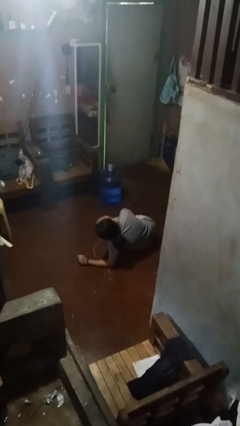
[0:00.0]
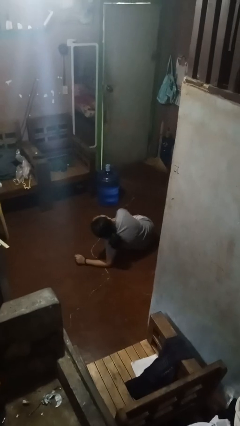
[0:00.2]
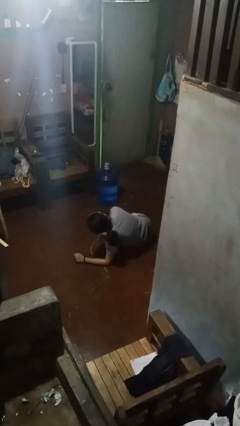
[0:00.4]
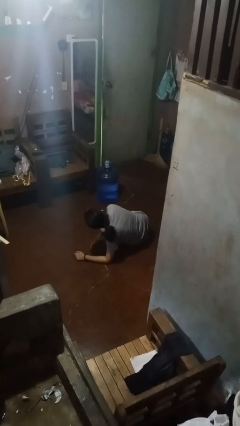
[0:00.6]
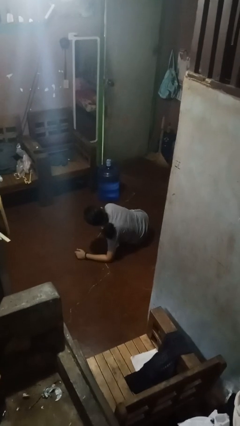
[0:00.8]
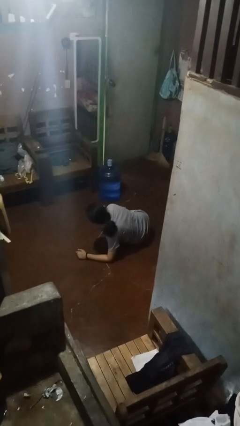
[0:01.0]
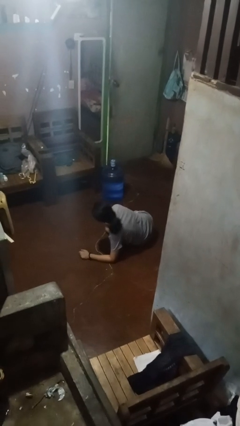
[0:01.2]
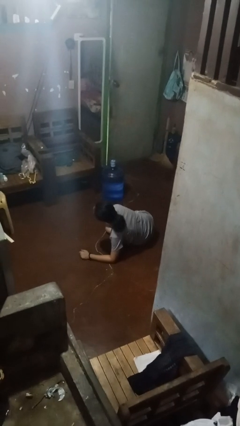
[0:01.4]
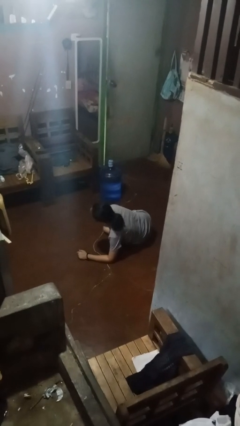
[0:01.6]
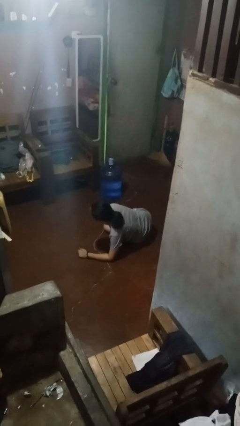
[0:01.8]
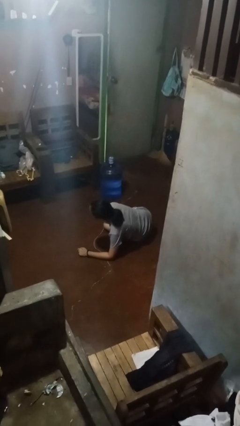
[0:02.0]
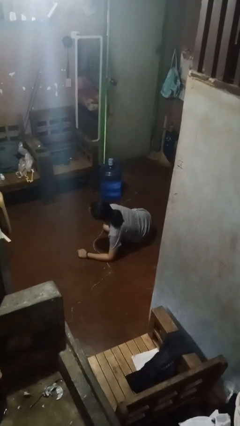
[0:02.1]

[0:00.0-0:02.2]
person lies down on floor

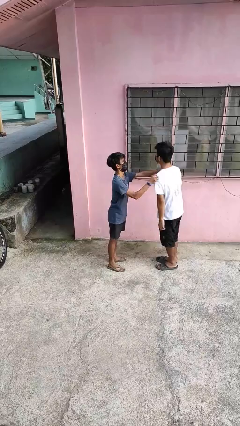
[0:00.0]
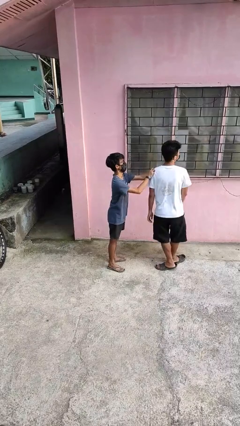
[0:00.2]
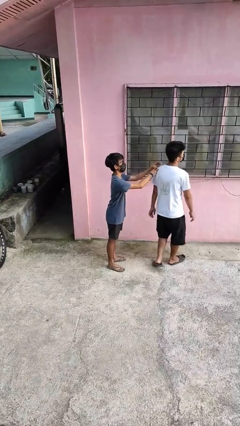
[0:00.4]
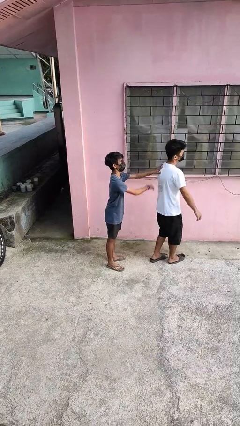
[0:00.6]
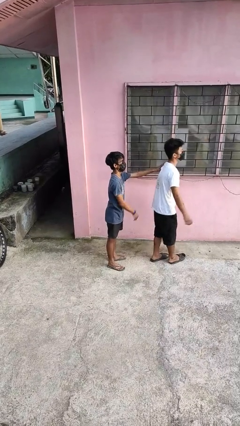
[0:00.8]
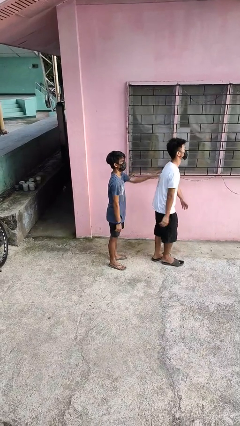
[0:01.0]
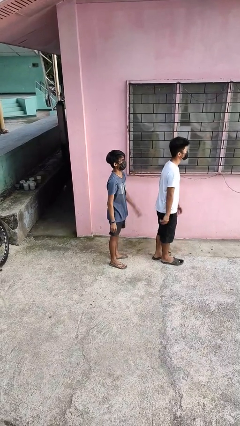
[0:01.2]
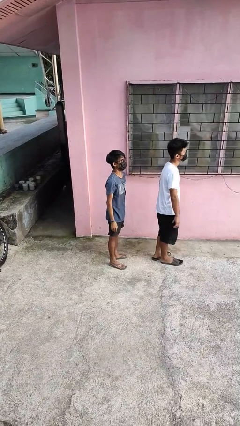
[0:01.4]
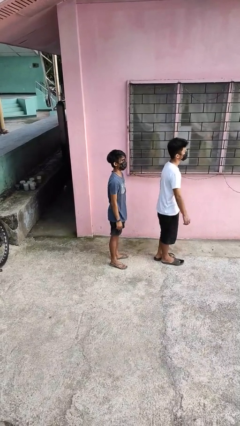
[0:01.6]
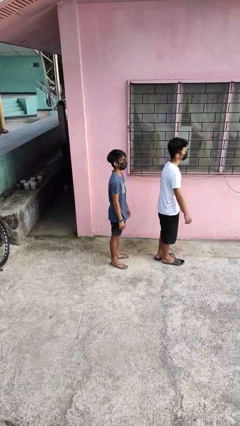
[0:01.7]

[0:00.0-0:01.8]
person spins person around

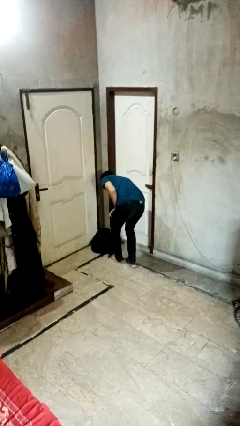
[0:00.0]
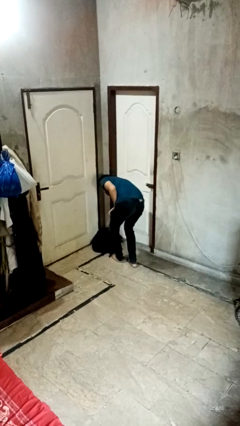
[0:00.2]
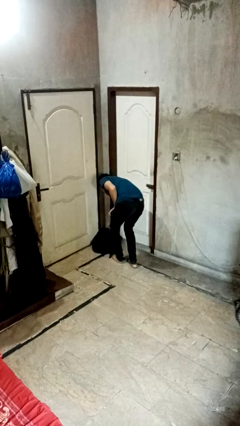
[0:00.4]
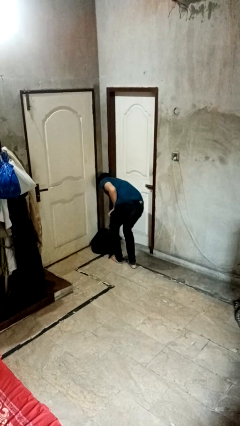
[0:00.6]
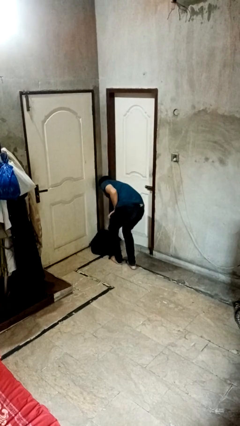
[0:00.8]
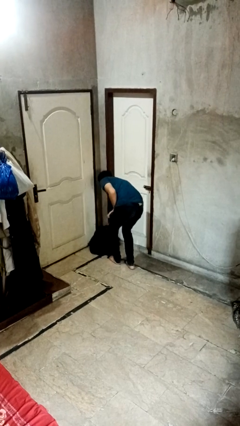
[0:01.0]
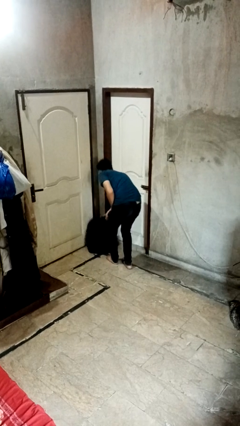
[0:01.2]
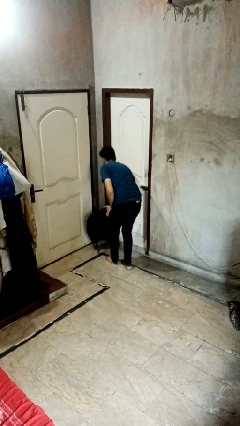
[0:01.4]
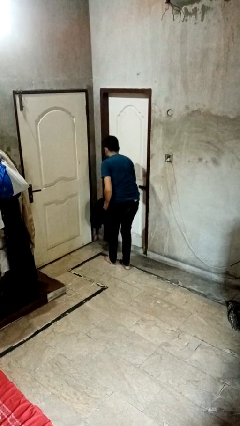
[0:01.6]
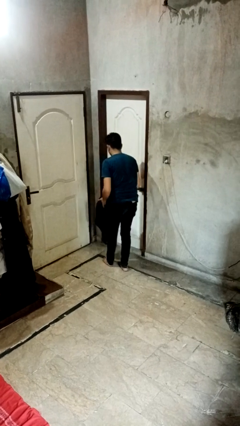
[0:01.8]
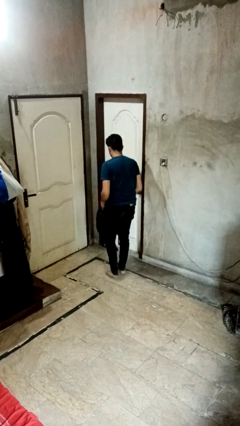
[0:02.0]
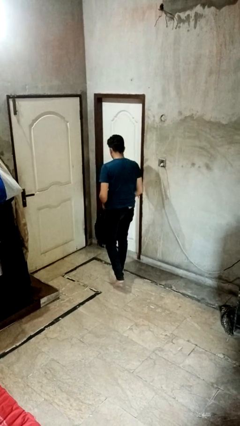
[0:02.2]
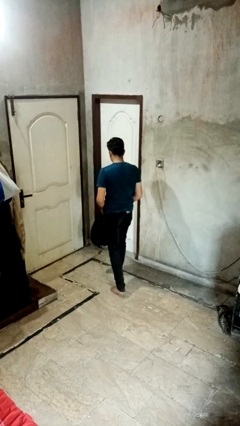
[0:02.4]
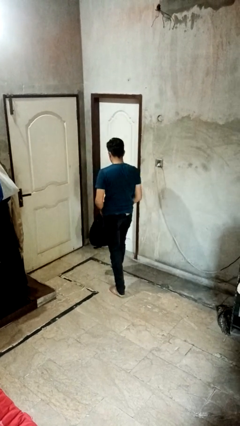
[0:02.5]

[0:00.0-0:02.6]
person picks up object from floor

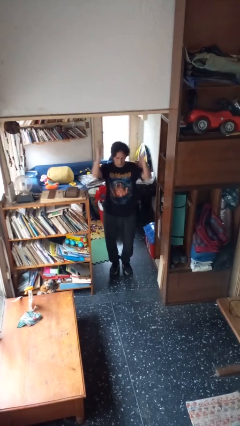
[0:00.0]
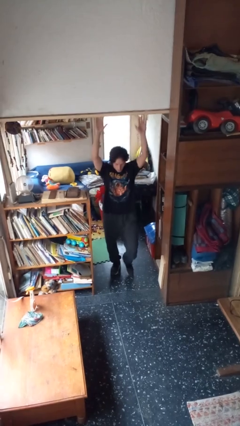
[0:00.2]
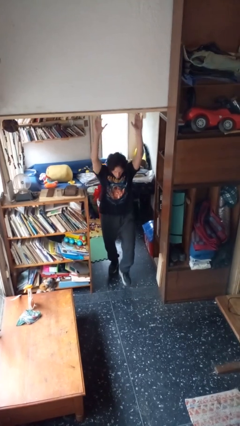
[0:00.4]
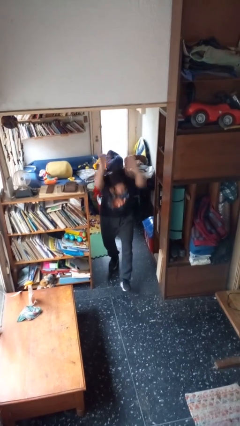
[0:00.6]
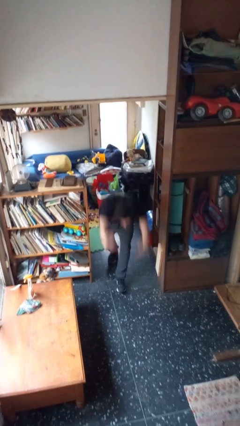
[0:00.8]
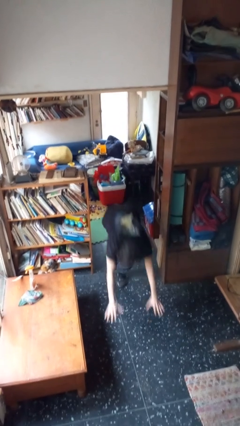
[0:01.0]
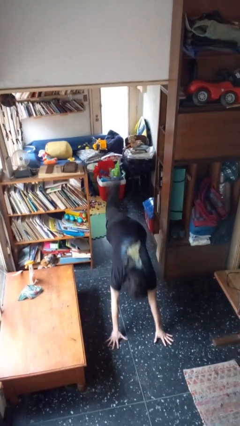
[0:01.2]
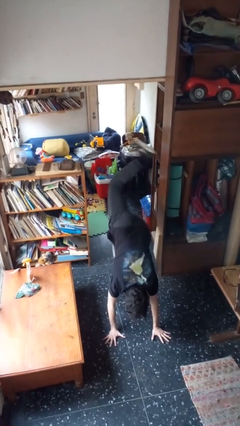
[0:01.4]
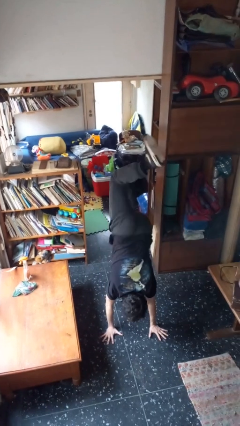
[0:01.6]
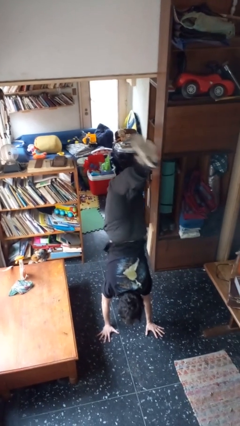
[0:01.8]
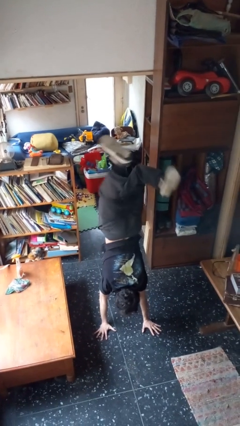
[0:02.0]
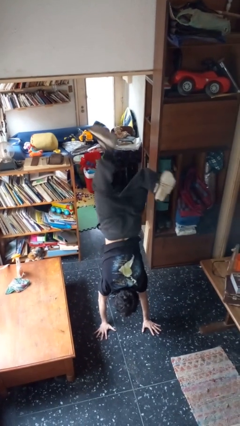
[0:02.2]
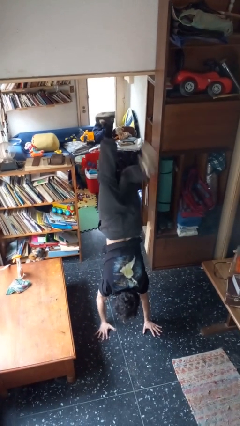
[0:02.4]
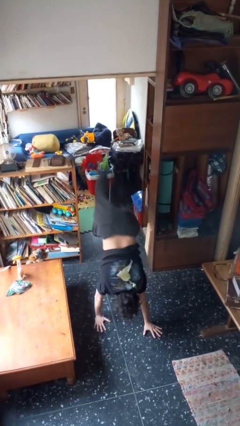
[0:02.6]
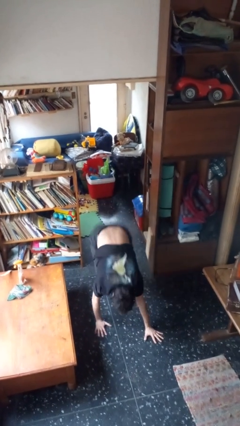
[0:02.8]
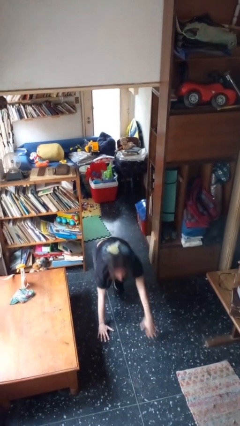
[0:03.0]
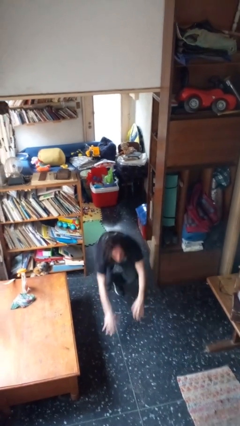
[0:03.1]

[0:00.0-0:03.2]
person handstand

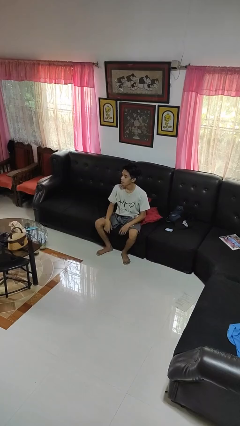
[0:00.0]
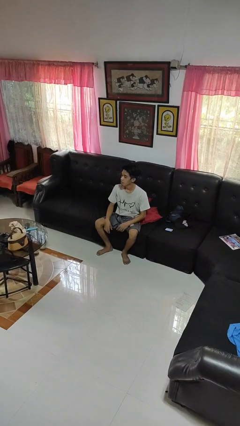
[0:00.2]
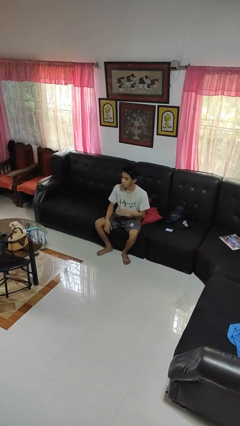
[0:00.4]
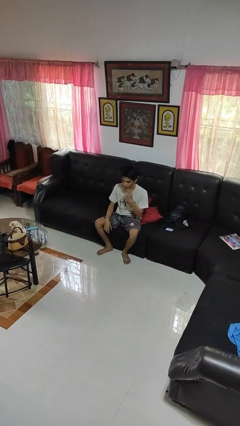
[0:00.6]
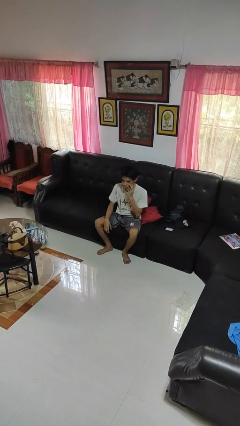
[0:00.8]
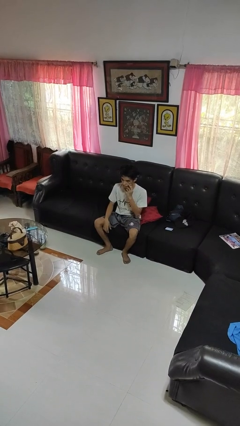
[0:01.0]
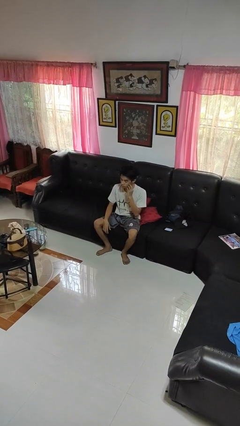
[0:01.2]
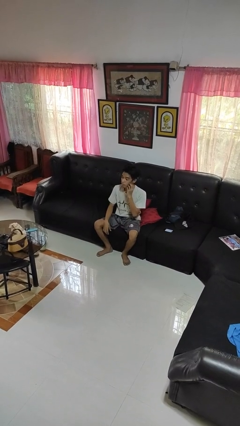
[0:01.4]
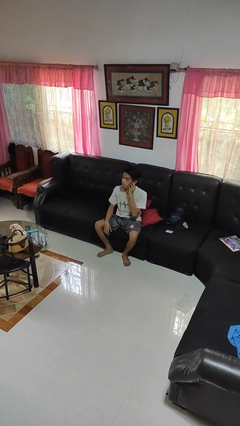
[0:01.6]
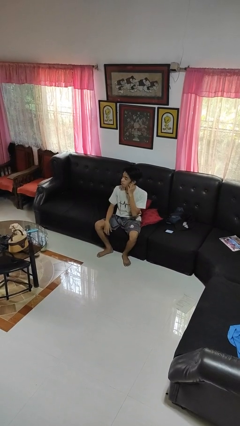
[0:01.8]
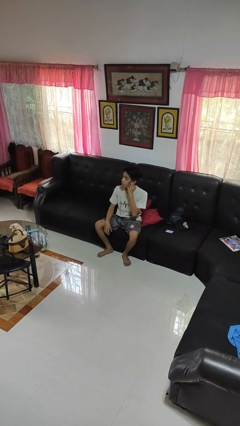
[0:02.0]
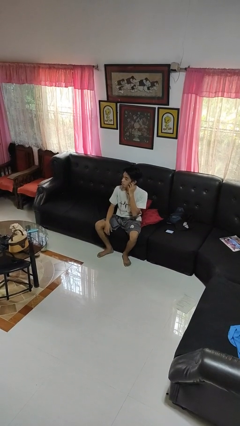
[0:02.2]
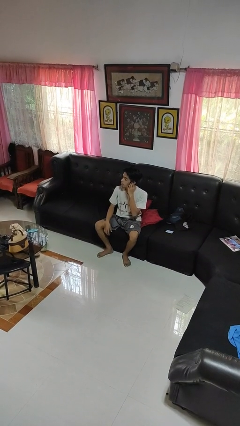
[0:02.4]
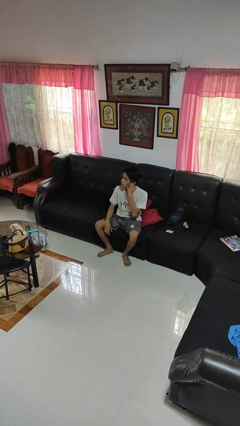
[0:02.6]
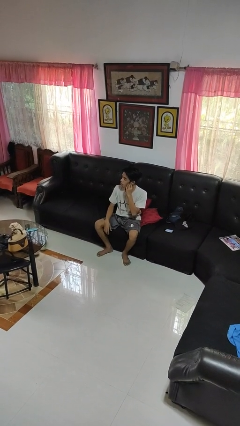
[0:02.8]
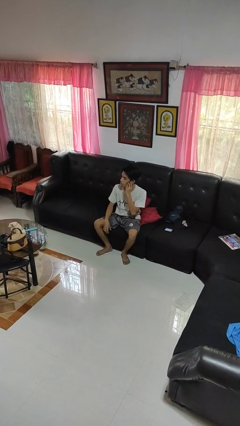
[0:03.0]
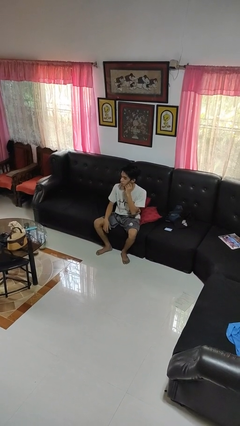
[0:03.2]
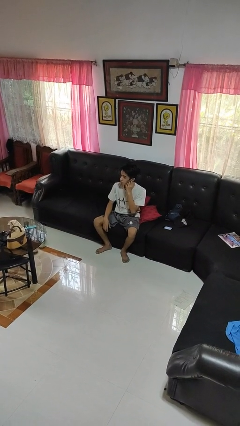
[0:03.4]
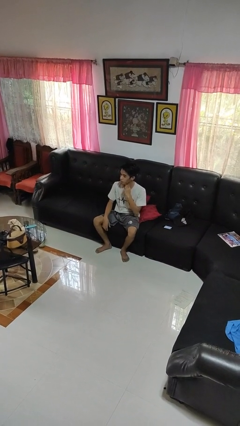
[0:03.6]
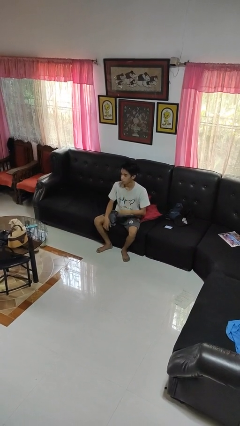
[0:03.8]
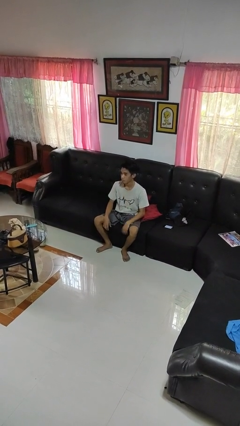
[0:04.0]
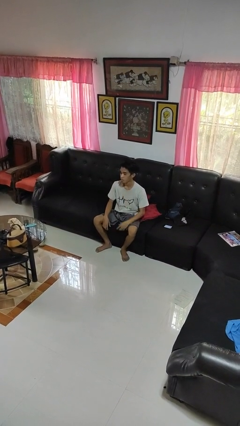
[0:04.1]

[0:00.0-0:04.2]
person scratches face

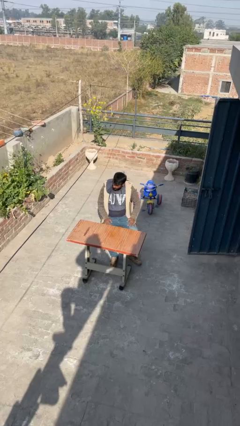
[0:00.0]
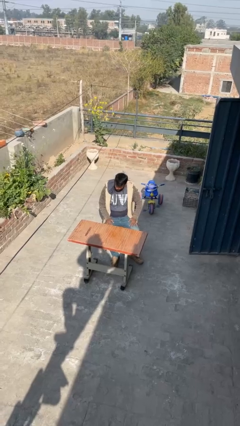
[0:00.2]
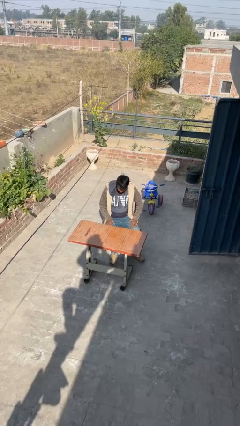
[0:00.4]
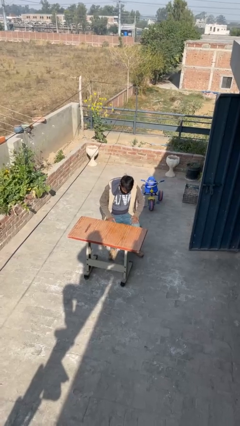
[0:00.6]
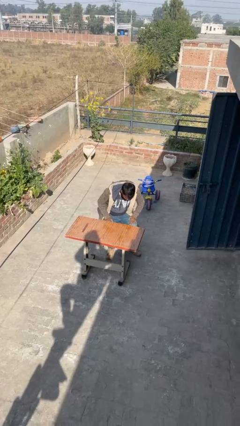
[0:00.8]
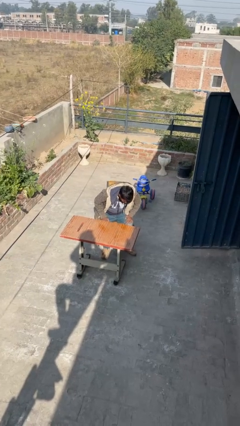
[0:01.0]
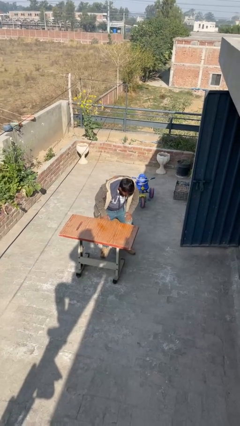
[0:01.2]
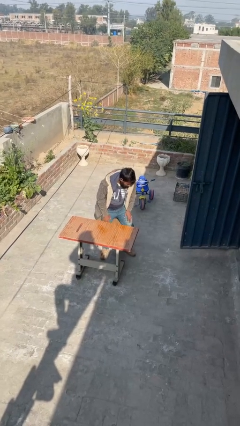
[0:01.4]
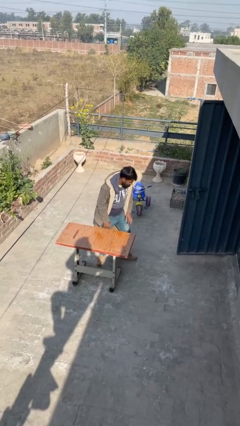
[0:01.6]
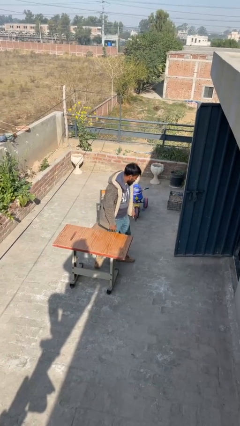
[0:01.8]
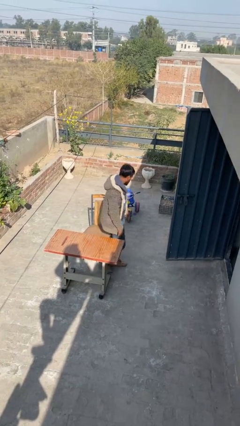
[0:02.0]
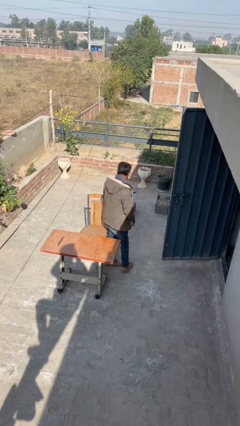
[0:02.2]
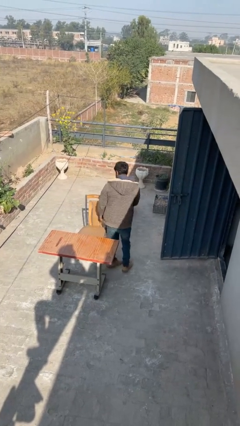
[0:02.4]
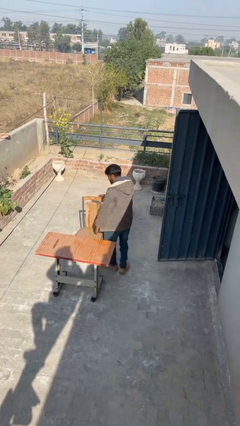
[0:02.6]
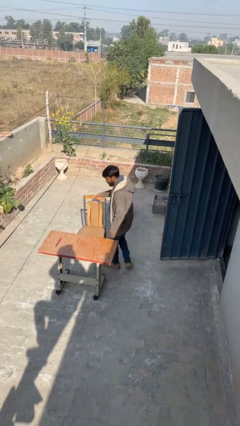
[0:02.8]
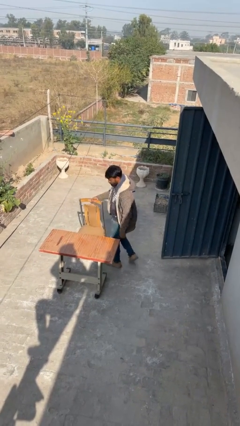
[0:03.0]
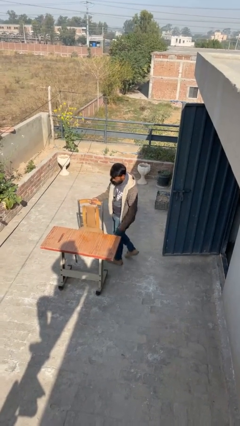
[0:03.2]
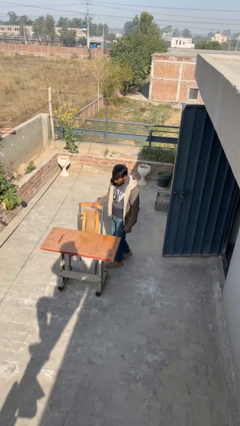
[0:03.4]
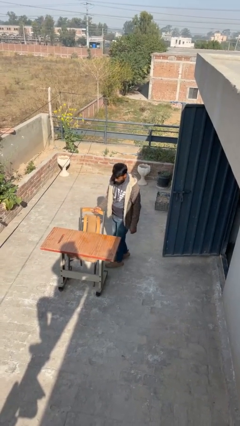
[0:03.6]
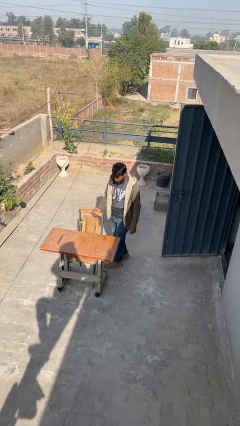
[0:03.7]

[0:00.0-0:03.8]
person stands up
